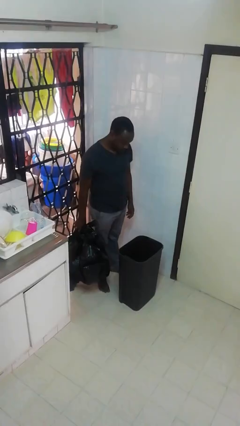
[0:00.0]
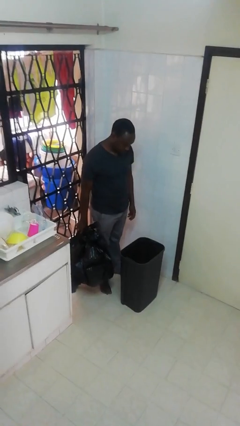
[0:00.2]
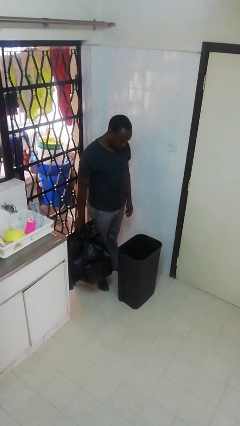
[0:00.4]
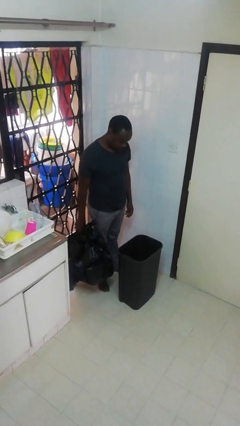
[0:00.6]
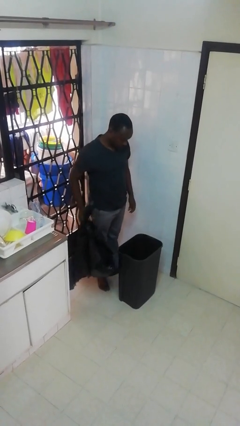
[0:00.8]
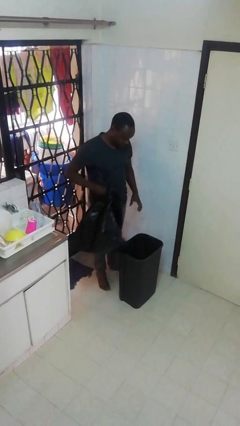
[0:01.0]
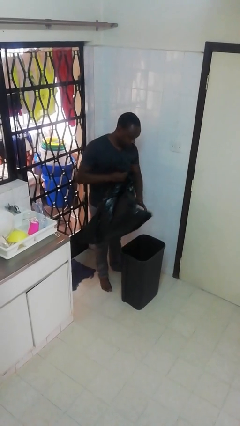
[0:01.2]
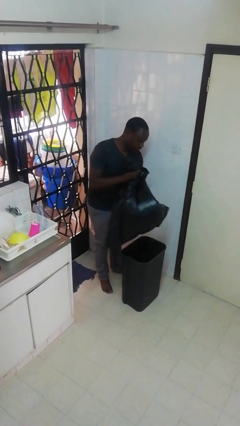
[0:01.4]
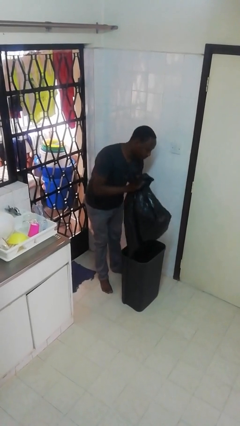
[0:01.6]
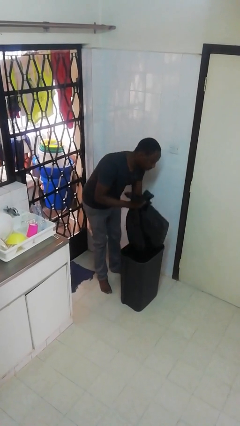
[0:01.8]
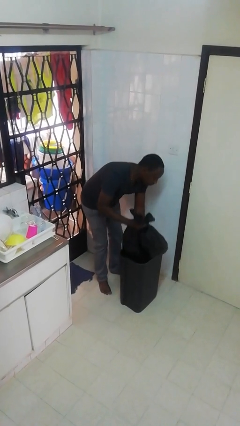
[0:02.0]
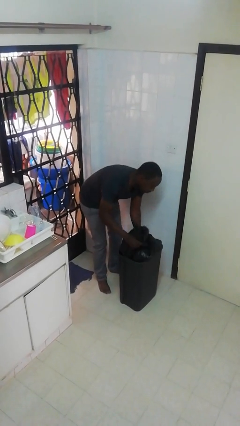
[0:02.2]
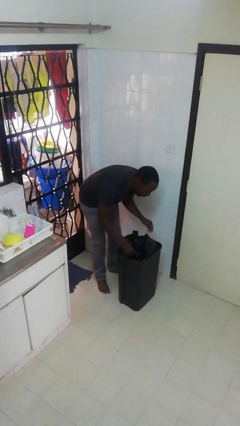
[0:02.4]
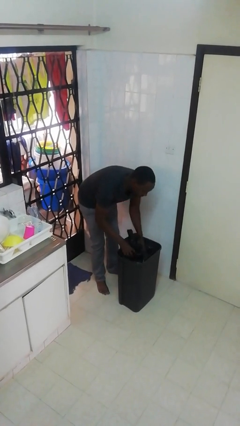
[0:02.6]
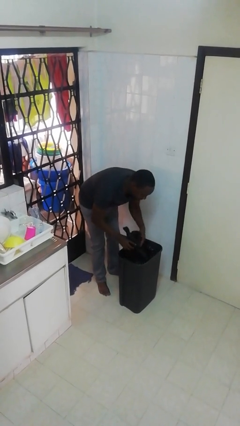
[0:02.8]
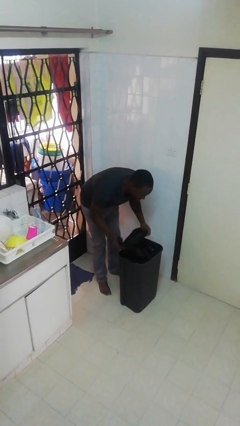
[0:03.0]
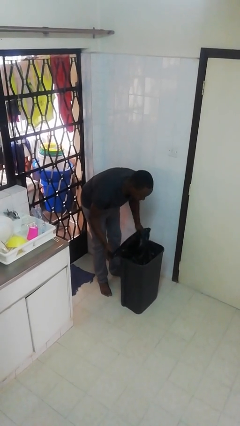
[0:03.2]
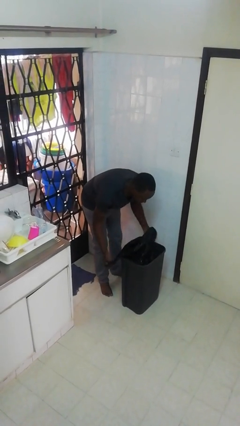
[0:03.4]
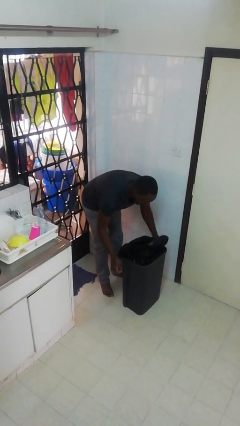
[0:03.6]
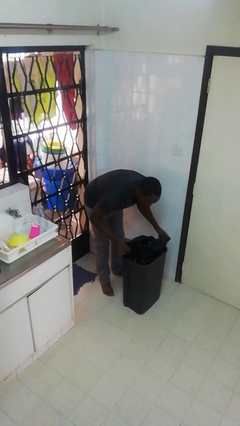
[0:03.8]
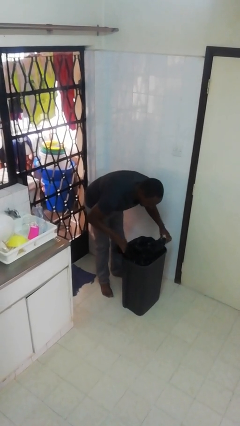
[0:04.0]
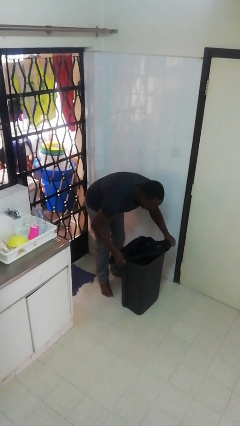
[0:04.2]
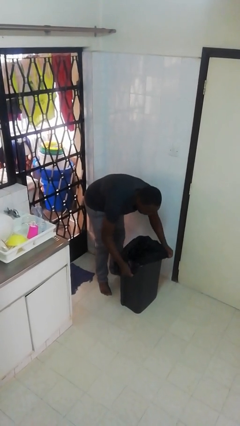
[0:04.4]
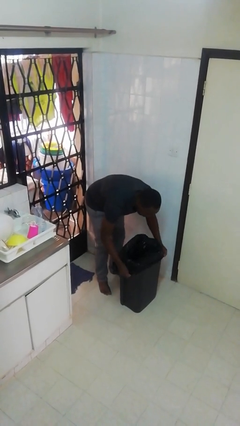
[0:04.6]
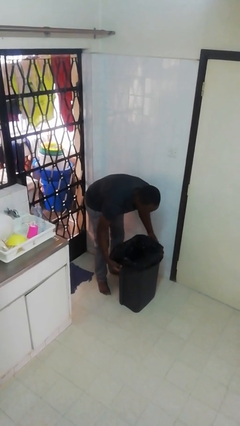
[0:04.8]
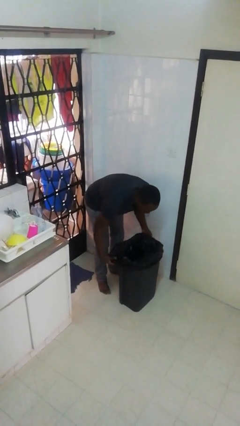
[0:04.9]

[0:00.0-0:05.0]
person inserts trashbag into trashcan

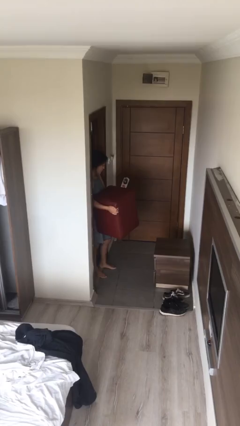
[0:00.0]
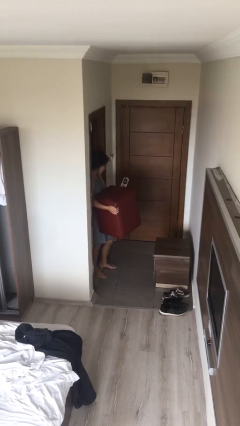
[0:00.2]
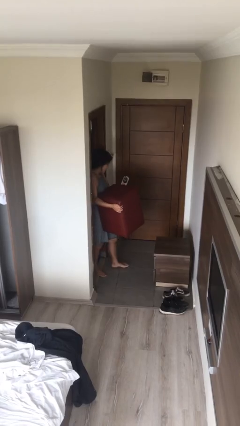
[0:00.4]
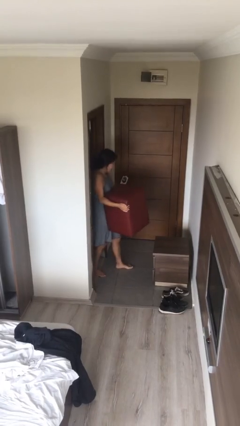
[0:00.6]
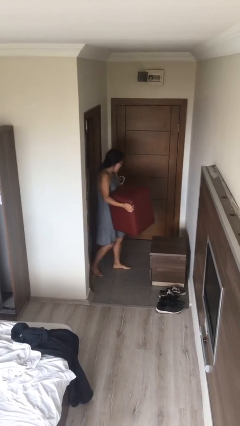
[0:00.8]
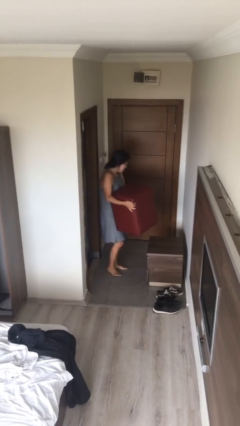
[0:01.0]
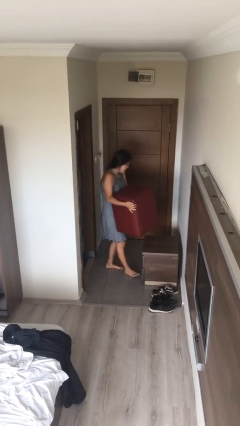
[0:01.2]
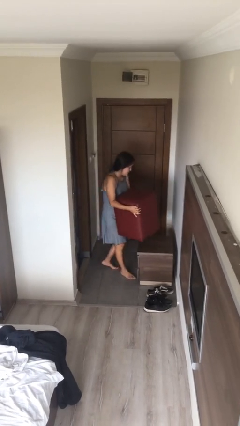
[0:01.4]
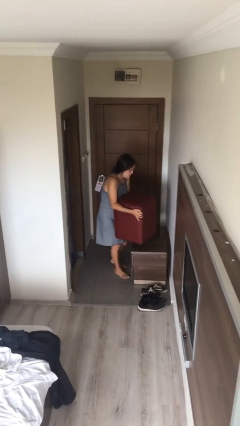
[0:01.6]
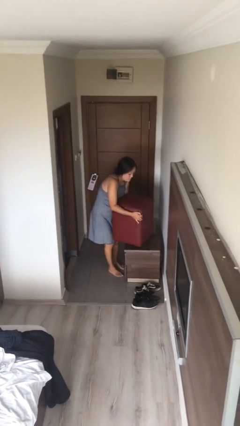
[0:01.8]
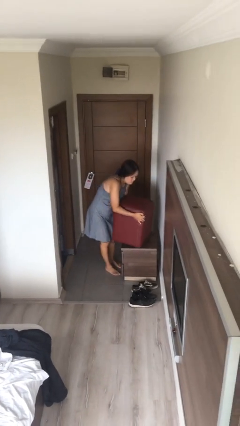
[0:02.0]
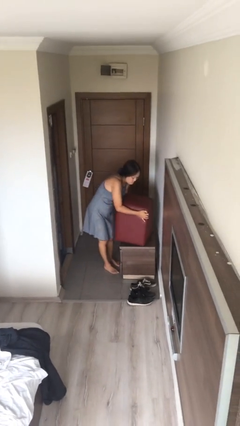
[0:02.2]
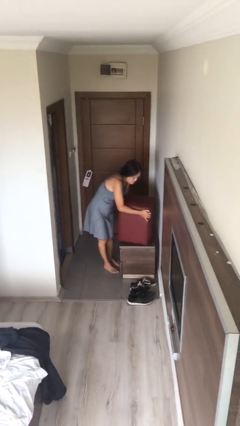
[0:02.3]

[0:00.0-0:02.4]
person carries heavy object

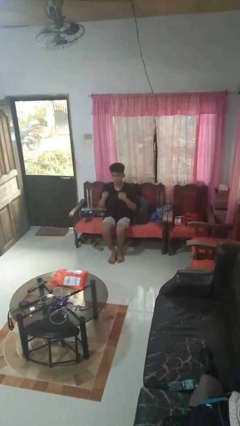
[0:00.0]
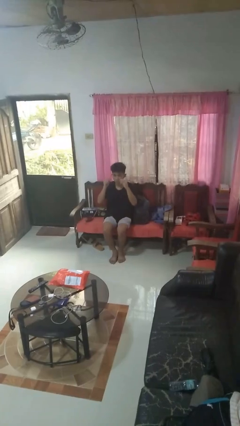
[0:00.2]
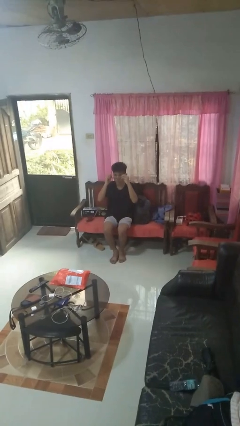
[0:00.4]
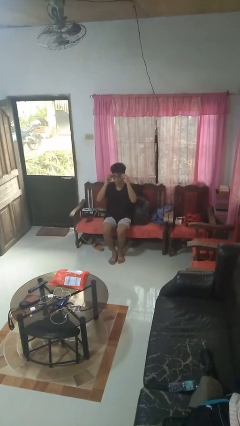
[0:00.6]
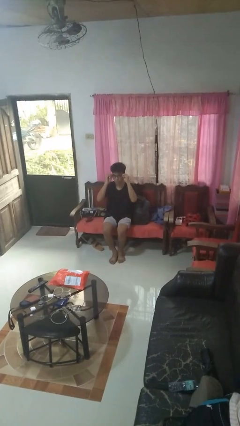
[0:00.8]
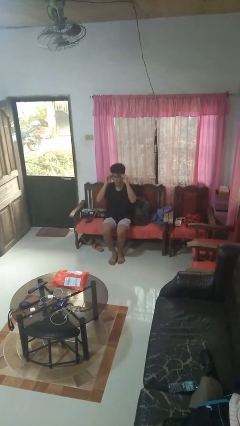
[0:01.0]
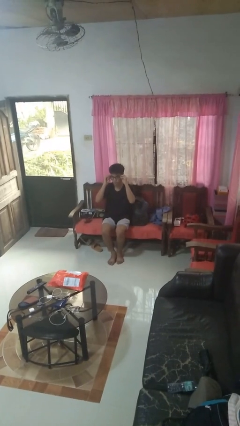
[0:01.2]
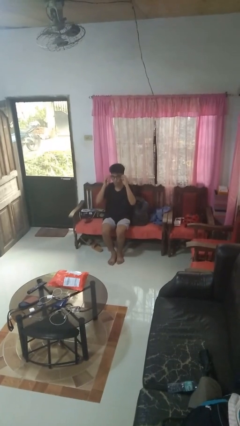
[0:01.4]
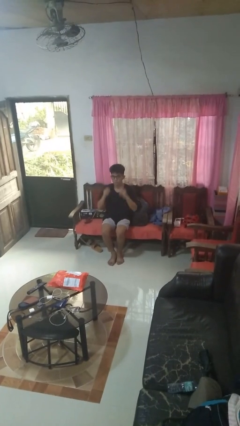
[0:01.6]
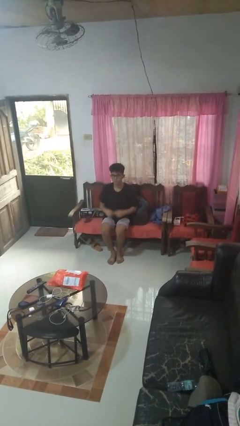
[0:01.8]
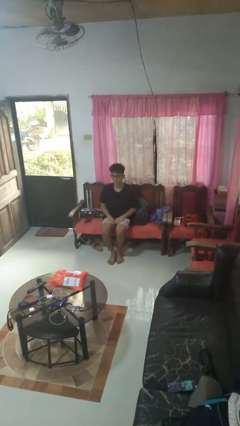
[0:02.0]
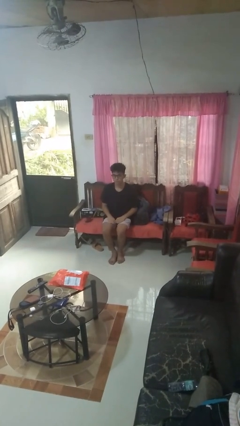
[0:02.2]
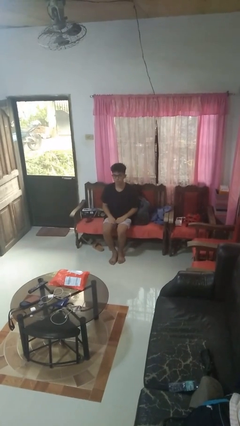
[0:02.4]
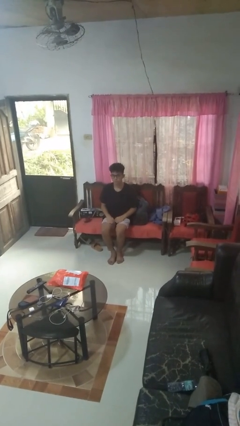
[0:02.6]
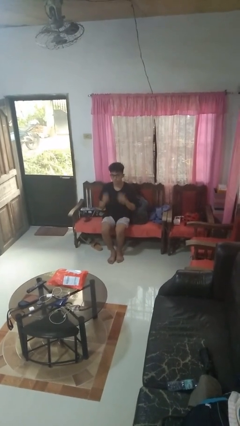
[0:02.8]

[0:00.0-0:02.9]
person puts on glasses

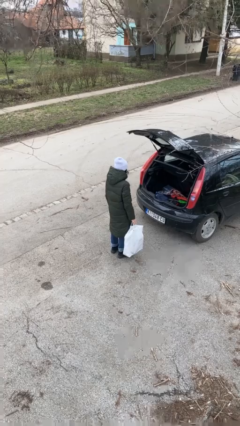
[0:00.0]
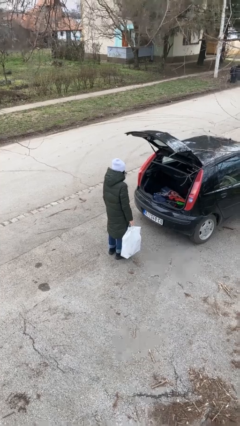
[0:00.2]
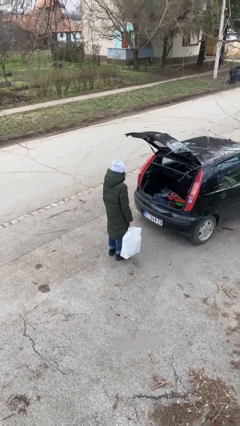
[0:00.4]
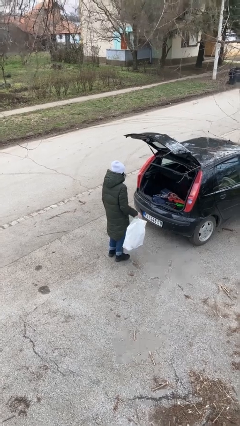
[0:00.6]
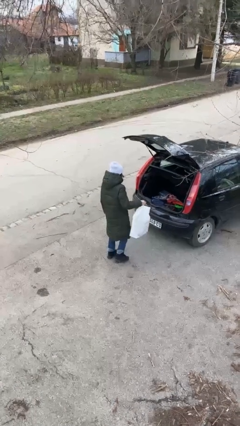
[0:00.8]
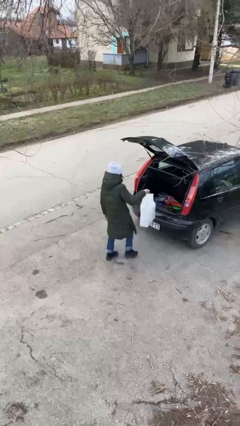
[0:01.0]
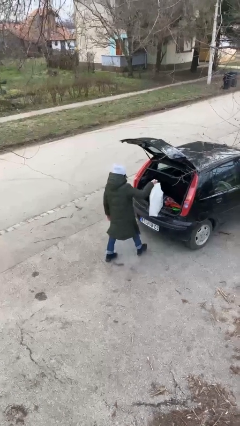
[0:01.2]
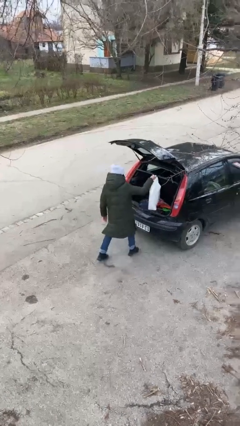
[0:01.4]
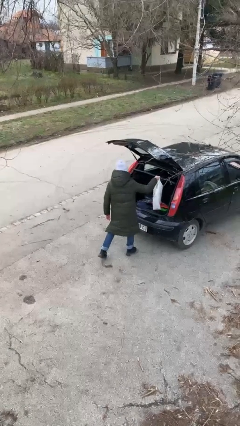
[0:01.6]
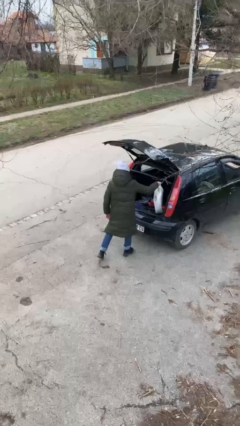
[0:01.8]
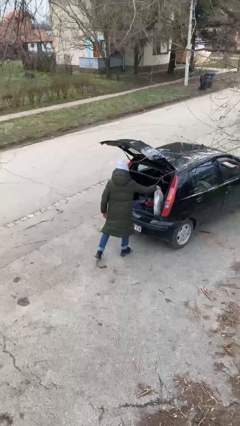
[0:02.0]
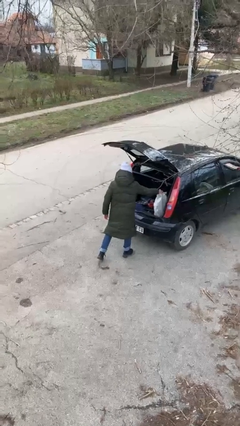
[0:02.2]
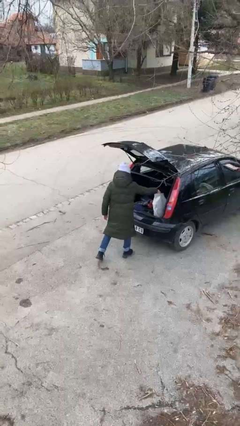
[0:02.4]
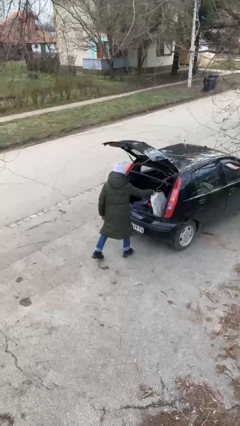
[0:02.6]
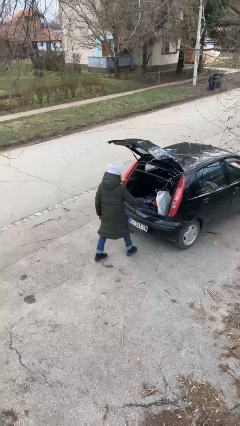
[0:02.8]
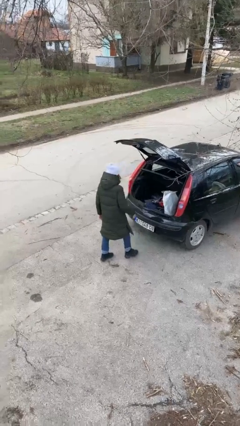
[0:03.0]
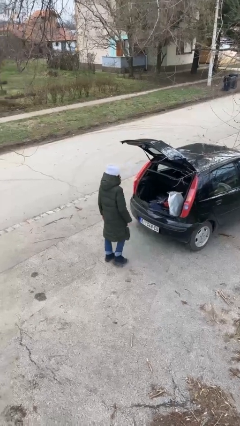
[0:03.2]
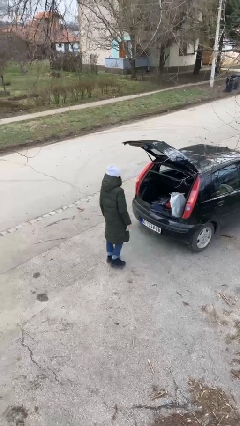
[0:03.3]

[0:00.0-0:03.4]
person loads car

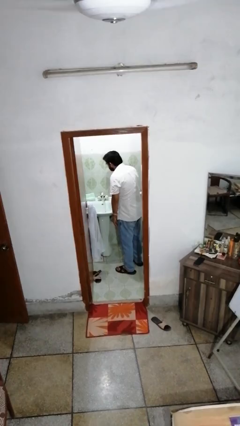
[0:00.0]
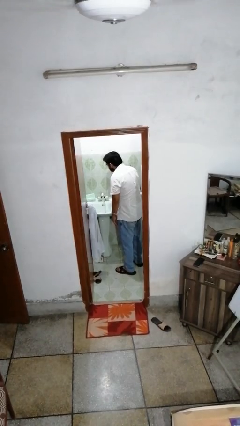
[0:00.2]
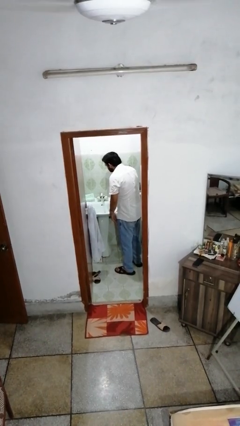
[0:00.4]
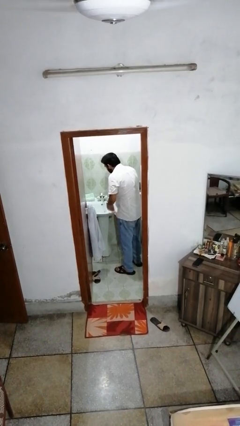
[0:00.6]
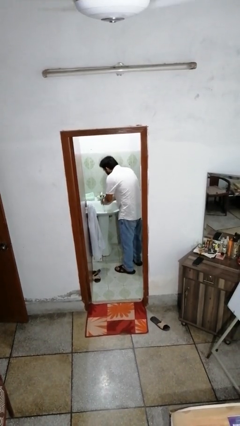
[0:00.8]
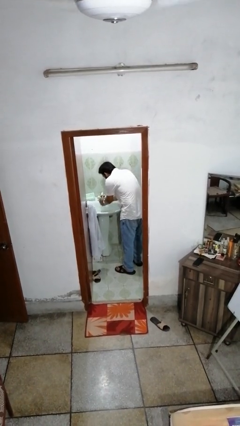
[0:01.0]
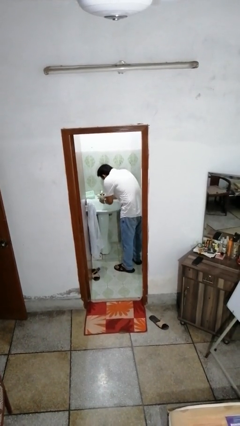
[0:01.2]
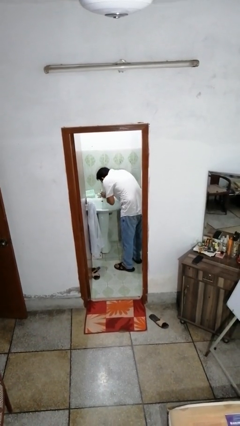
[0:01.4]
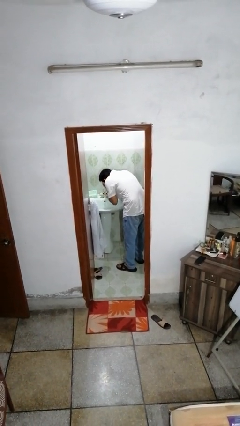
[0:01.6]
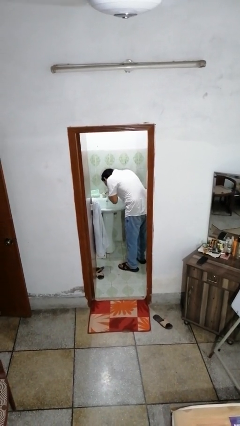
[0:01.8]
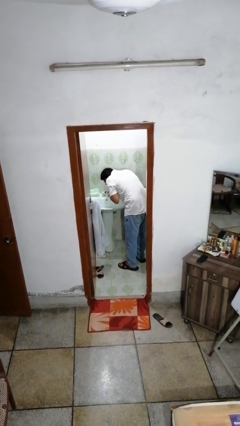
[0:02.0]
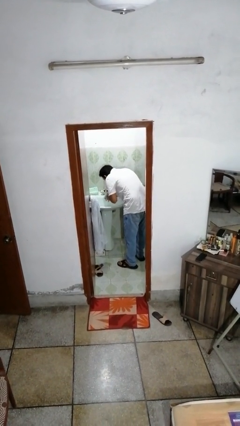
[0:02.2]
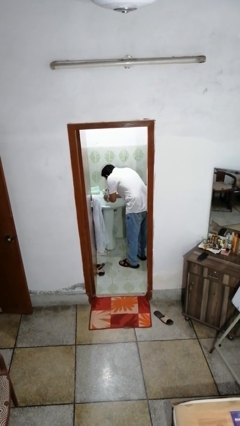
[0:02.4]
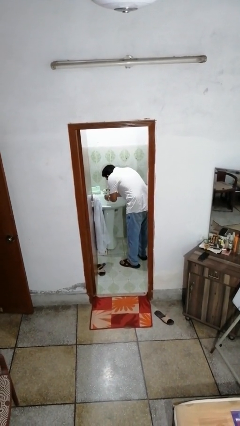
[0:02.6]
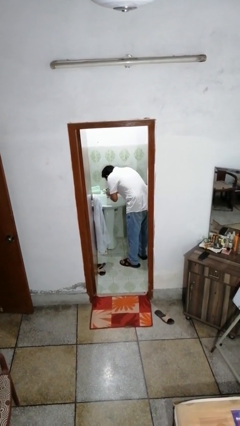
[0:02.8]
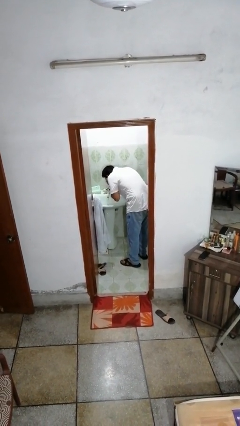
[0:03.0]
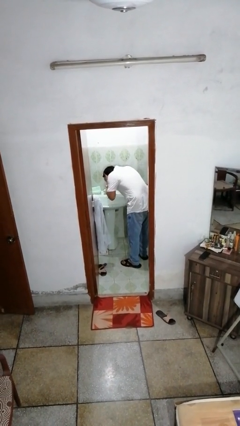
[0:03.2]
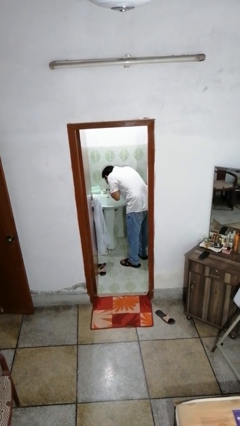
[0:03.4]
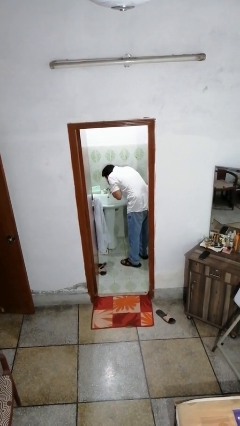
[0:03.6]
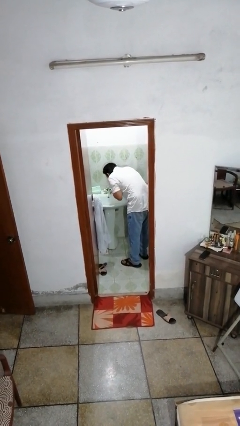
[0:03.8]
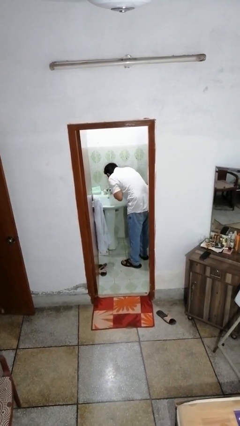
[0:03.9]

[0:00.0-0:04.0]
person washes face
